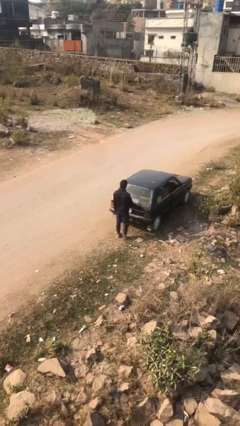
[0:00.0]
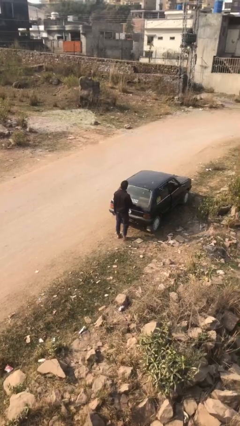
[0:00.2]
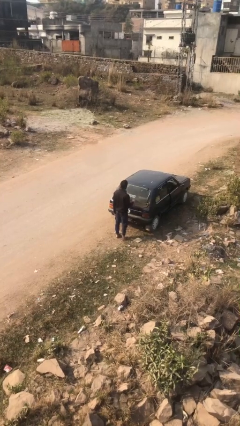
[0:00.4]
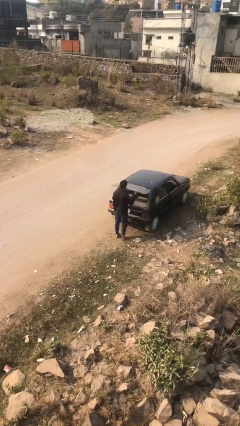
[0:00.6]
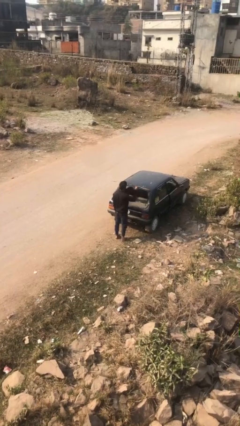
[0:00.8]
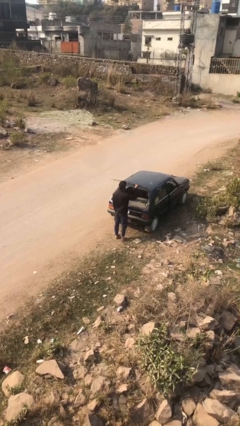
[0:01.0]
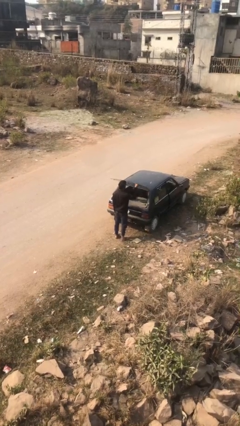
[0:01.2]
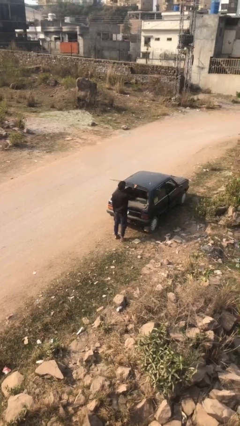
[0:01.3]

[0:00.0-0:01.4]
person opens car trunk

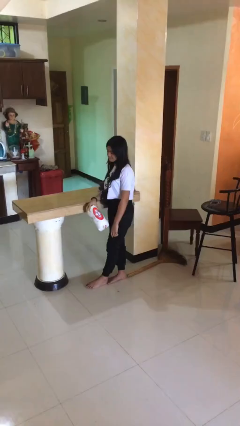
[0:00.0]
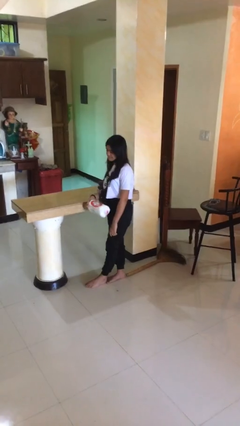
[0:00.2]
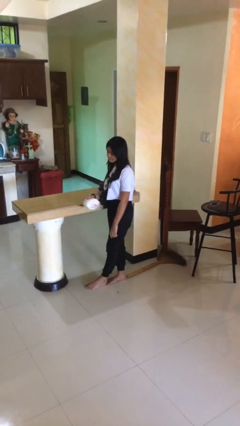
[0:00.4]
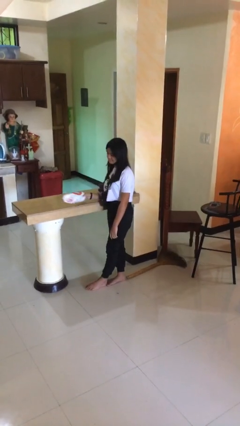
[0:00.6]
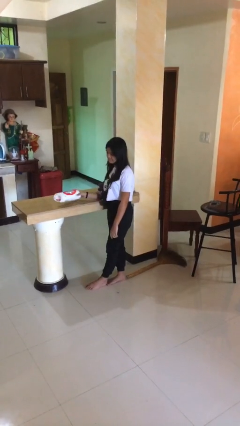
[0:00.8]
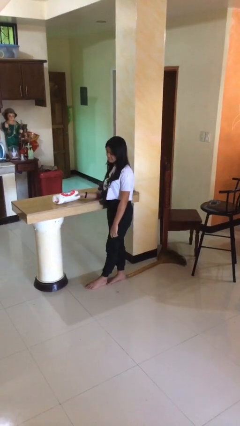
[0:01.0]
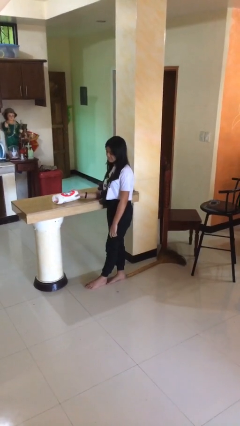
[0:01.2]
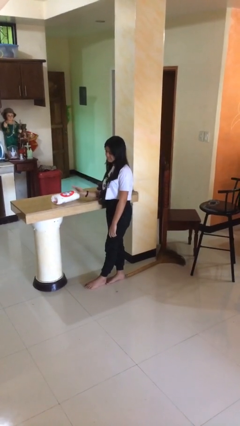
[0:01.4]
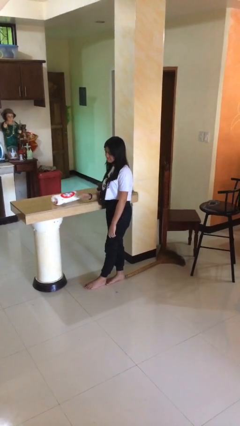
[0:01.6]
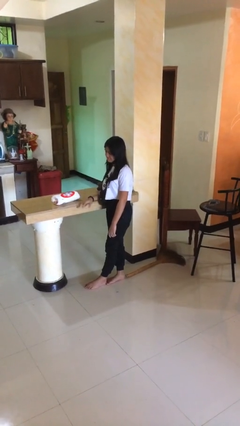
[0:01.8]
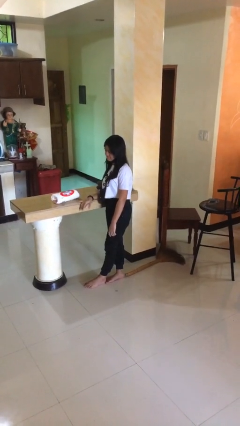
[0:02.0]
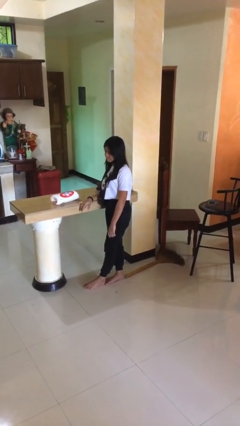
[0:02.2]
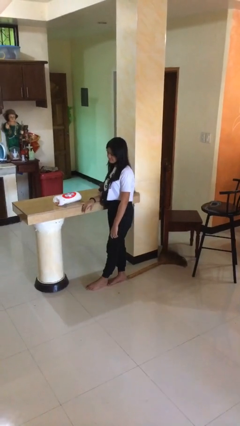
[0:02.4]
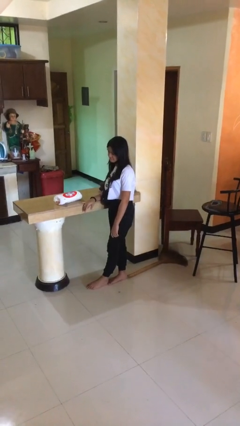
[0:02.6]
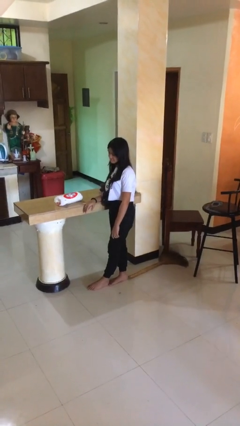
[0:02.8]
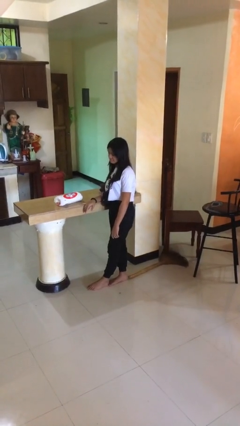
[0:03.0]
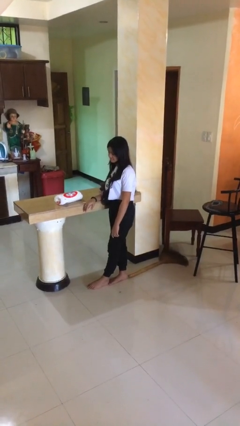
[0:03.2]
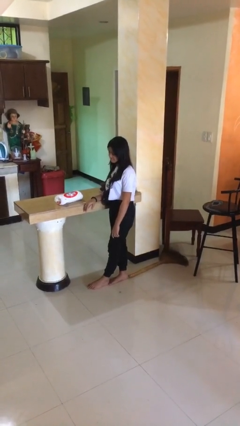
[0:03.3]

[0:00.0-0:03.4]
person puts down object on countertop

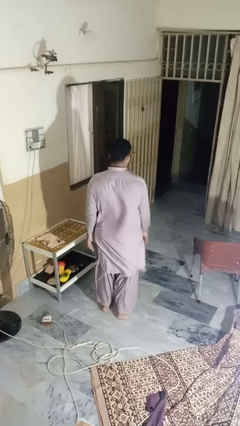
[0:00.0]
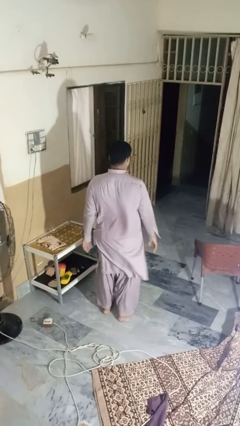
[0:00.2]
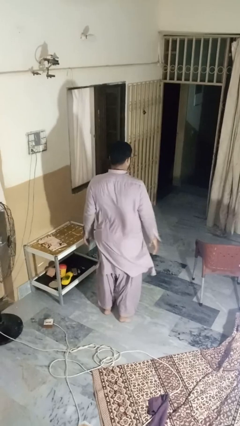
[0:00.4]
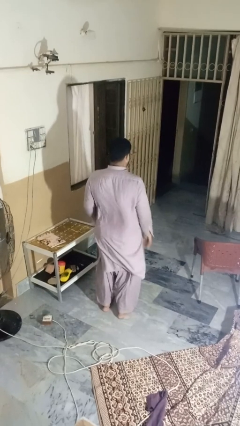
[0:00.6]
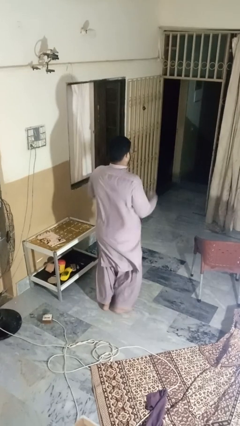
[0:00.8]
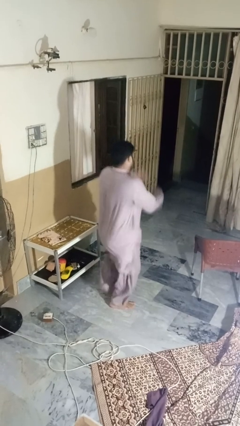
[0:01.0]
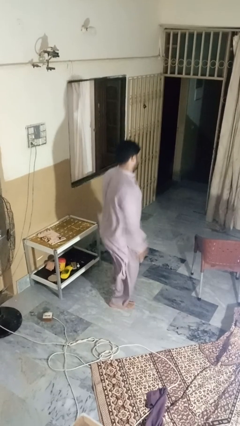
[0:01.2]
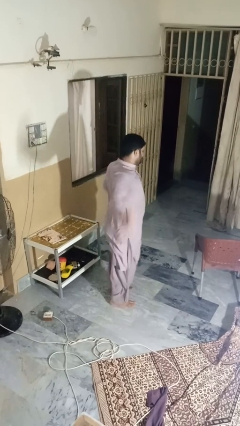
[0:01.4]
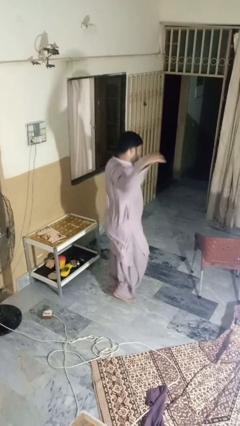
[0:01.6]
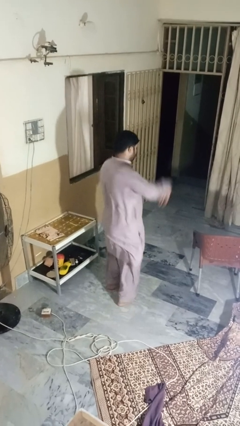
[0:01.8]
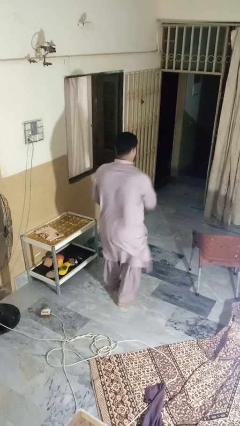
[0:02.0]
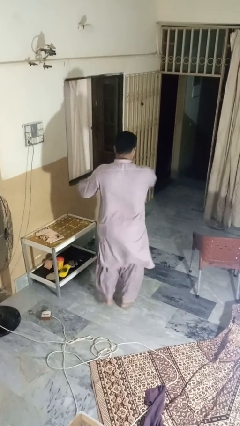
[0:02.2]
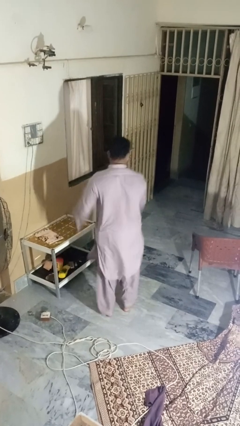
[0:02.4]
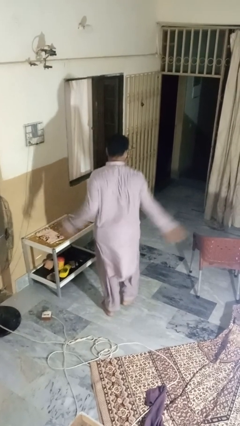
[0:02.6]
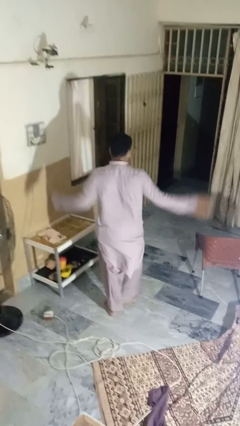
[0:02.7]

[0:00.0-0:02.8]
person dances in place

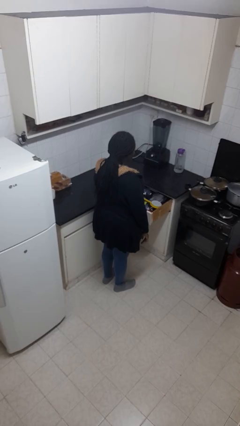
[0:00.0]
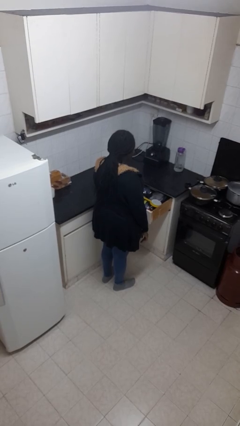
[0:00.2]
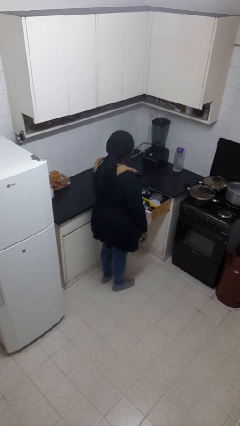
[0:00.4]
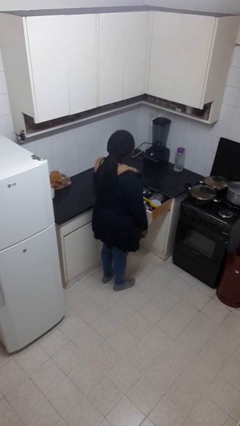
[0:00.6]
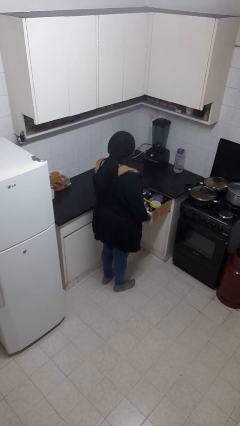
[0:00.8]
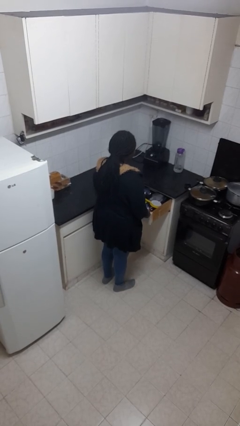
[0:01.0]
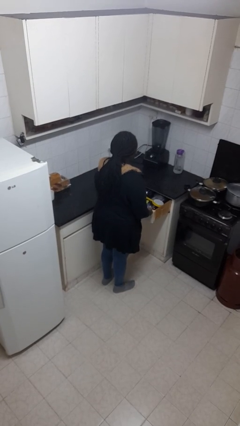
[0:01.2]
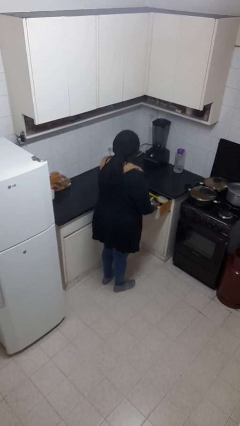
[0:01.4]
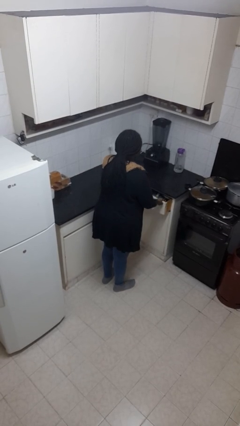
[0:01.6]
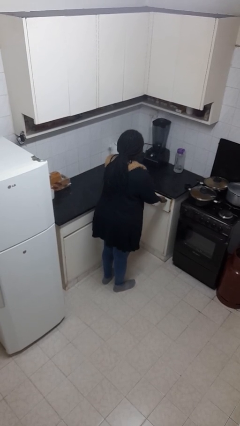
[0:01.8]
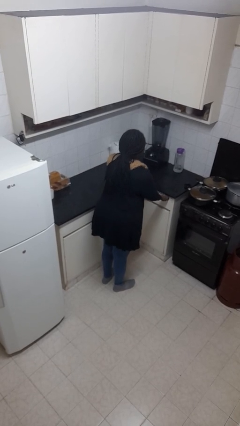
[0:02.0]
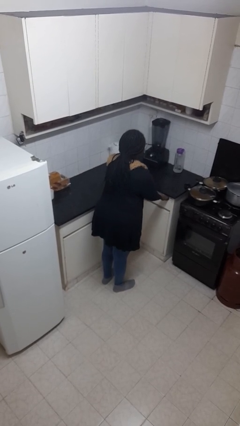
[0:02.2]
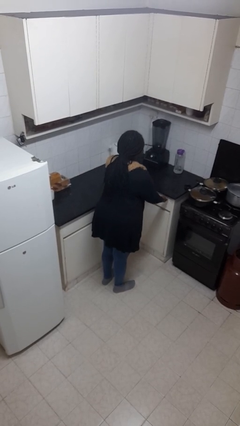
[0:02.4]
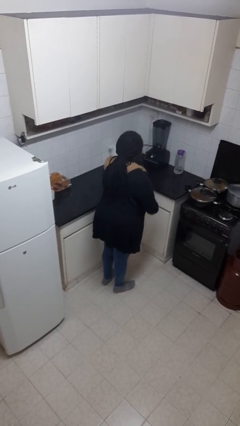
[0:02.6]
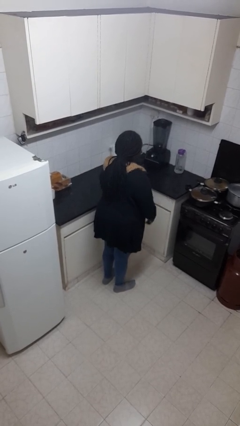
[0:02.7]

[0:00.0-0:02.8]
person closes kitchen drawer

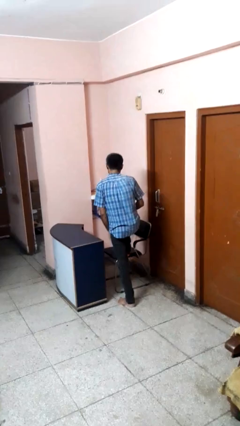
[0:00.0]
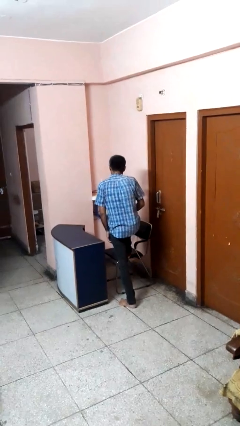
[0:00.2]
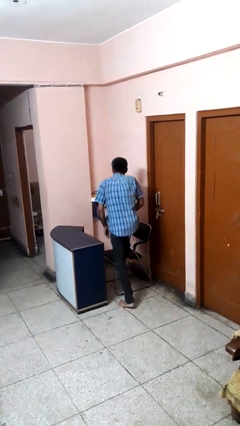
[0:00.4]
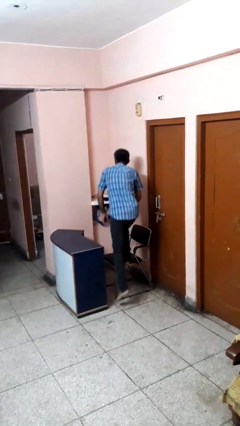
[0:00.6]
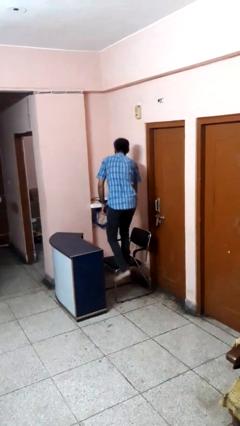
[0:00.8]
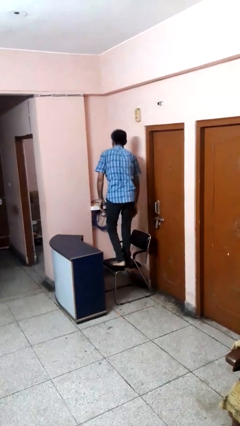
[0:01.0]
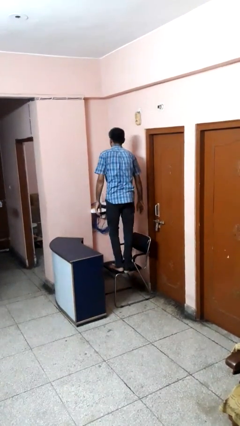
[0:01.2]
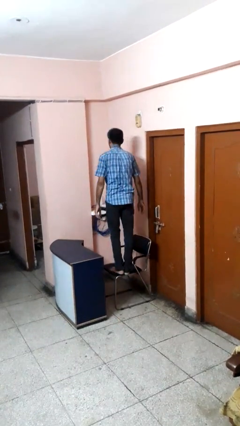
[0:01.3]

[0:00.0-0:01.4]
person climbs on chair

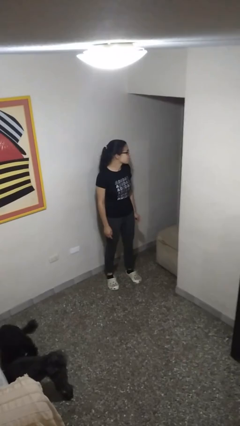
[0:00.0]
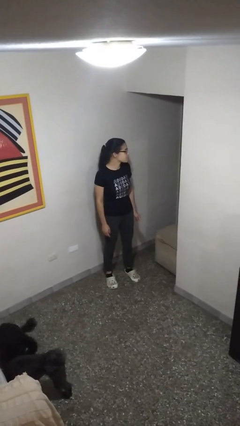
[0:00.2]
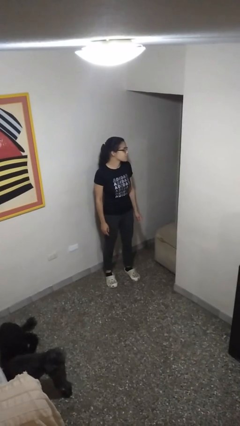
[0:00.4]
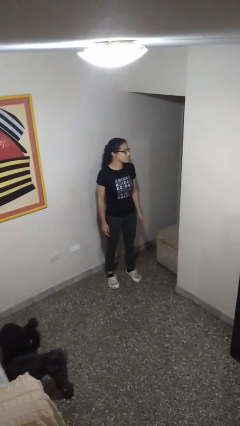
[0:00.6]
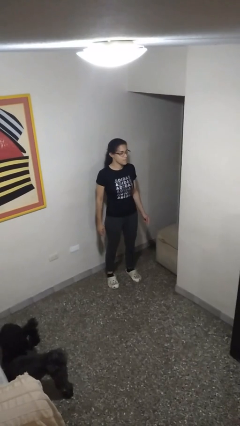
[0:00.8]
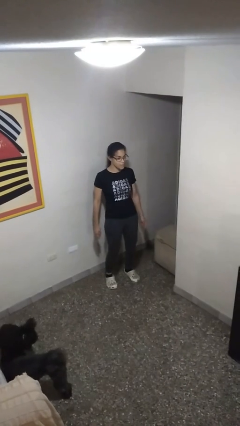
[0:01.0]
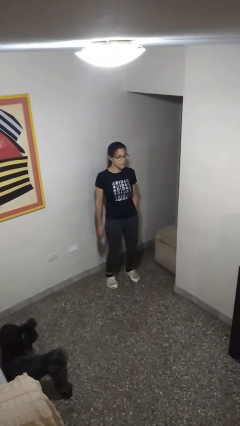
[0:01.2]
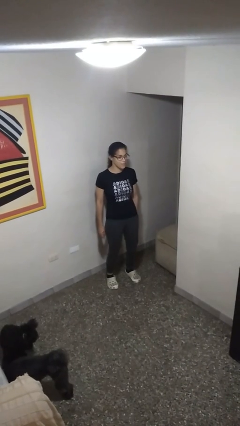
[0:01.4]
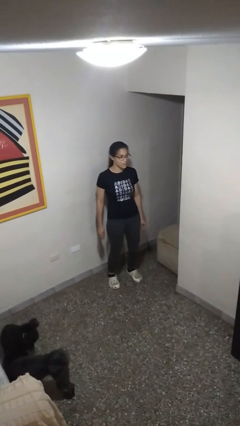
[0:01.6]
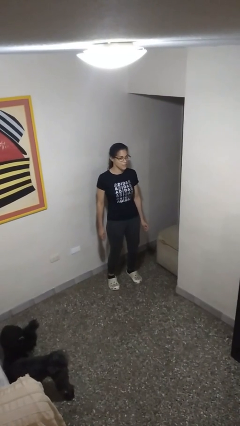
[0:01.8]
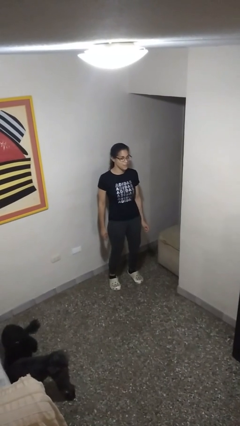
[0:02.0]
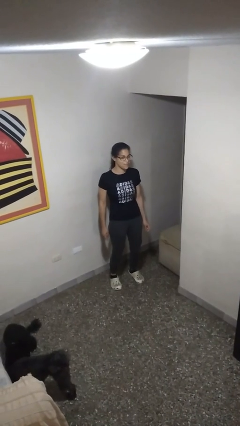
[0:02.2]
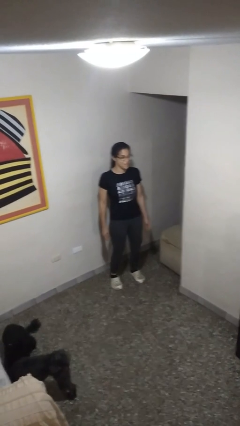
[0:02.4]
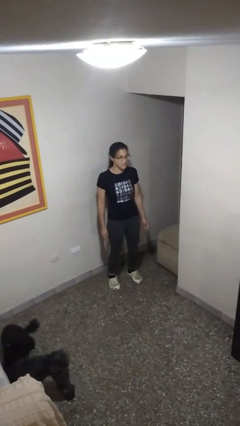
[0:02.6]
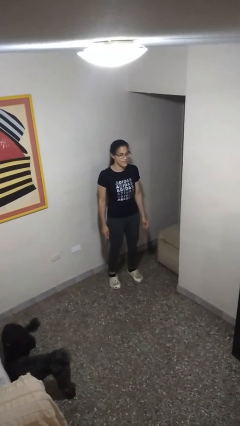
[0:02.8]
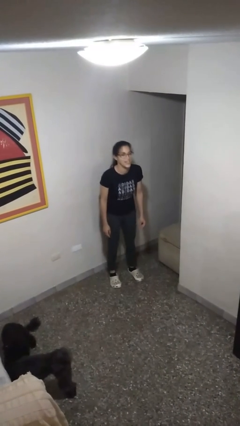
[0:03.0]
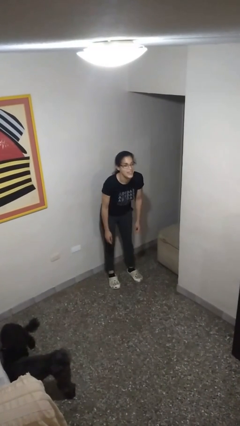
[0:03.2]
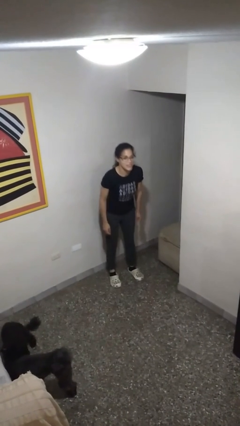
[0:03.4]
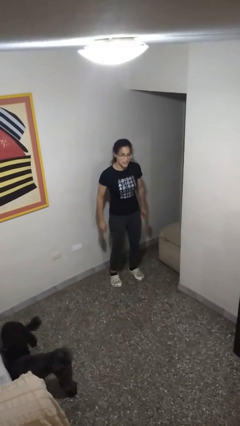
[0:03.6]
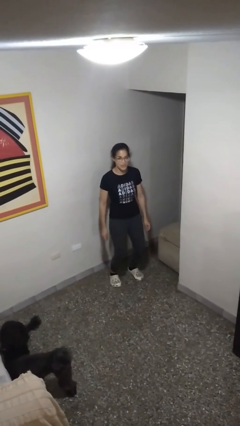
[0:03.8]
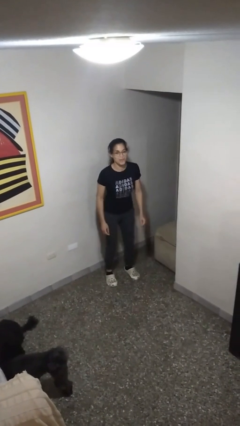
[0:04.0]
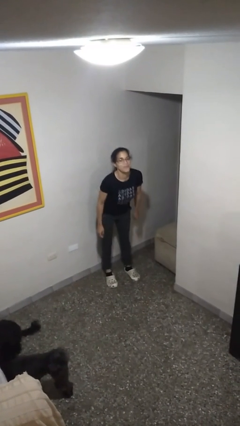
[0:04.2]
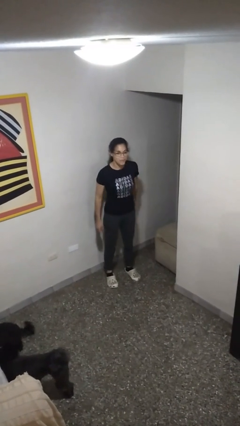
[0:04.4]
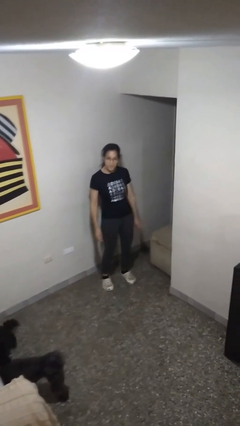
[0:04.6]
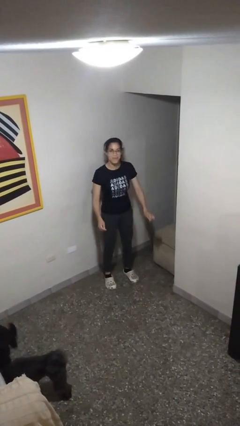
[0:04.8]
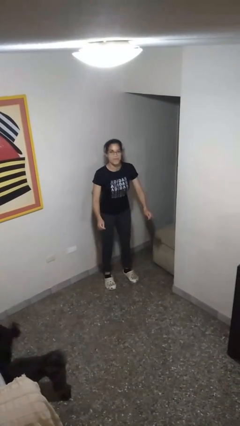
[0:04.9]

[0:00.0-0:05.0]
person wiggles hips

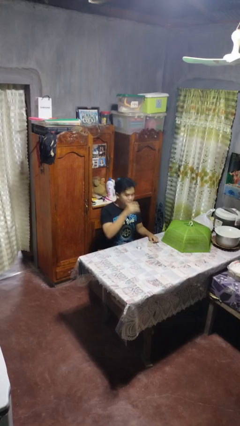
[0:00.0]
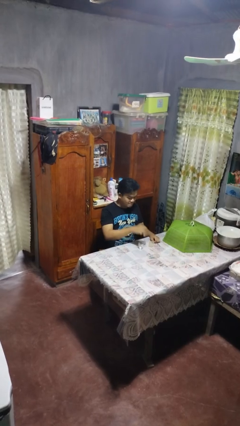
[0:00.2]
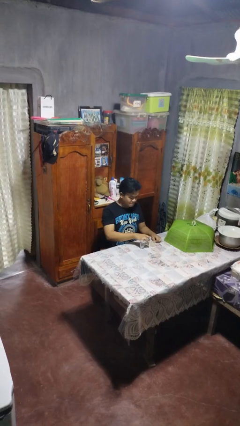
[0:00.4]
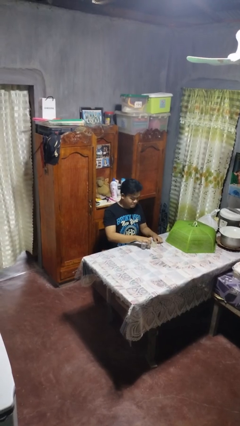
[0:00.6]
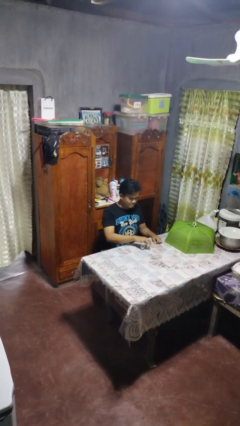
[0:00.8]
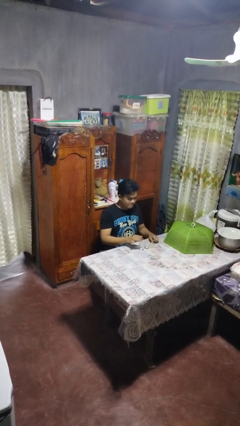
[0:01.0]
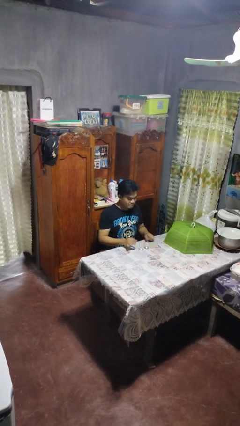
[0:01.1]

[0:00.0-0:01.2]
person puts down object on table
